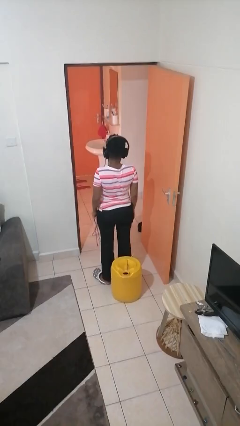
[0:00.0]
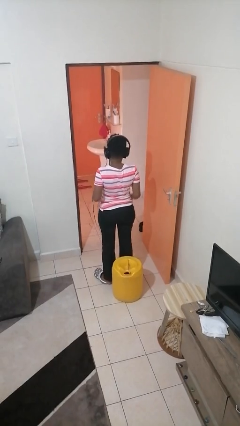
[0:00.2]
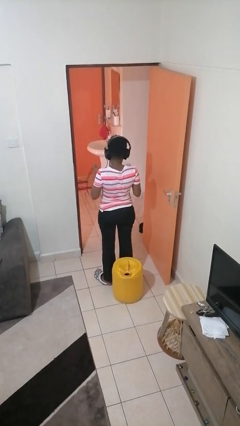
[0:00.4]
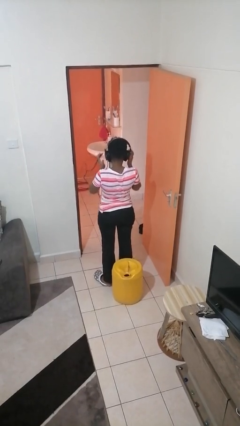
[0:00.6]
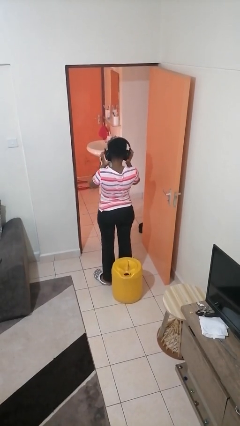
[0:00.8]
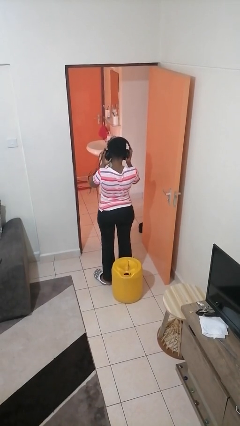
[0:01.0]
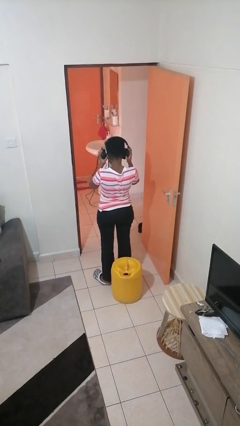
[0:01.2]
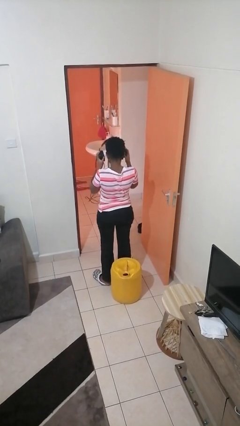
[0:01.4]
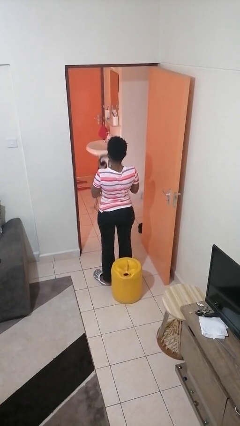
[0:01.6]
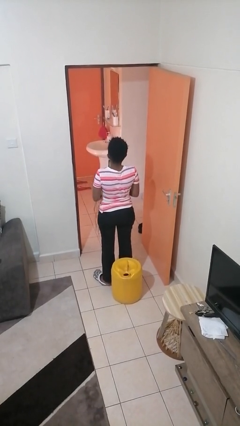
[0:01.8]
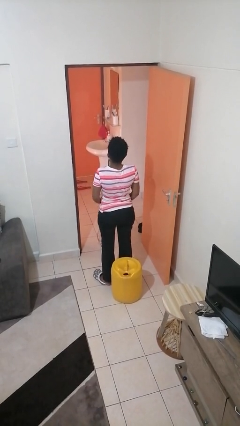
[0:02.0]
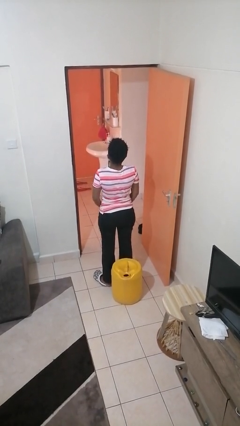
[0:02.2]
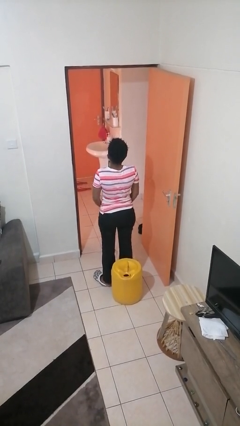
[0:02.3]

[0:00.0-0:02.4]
person takes off headphones

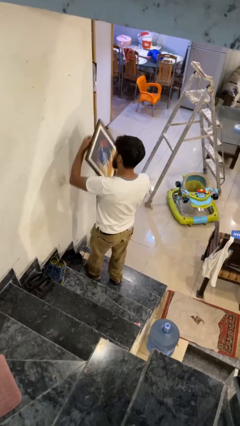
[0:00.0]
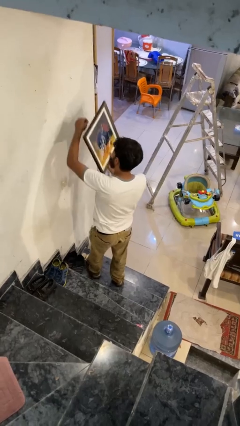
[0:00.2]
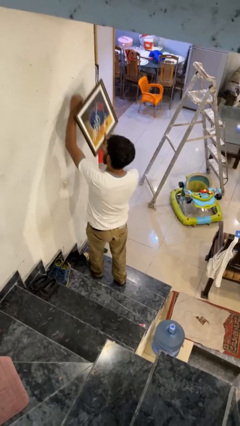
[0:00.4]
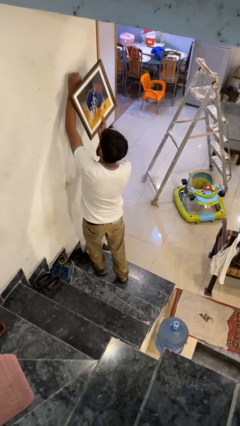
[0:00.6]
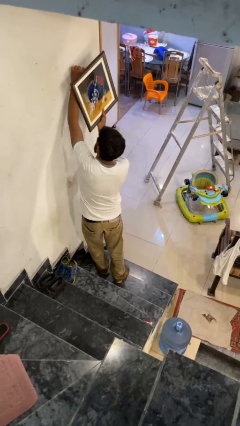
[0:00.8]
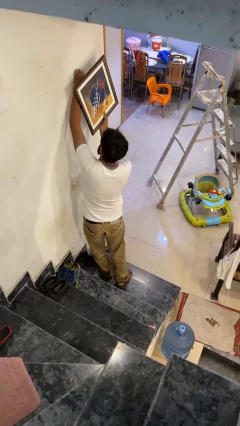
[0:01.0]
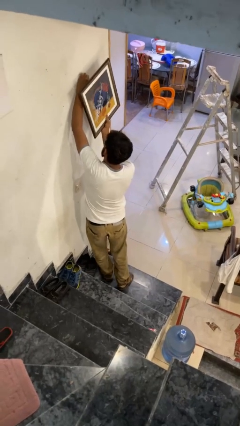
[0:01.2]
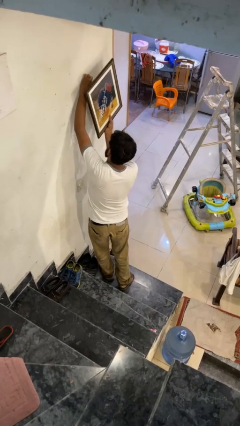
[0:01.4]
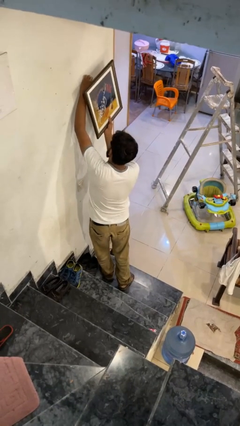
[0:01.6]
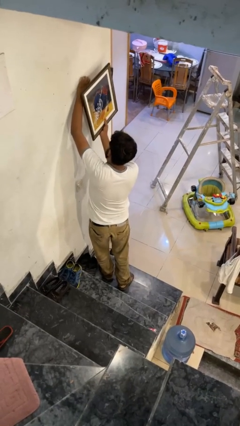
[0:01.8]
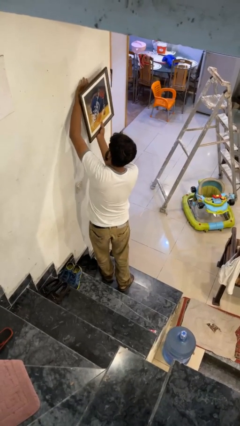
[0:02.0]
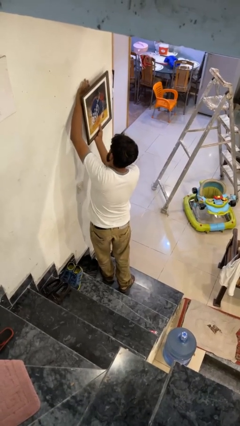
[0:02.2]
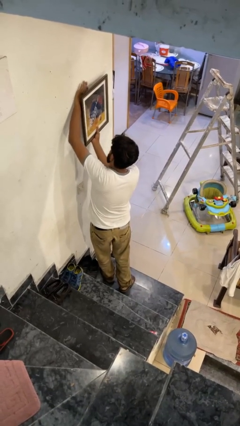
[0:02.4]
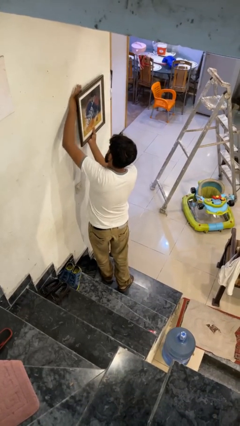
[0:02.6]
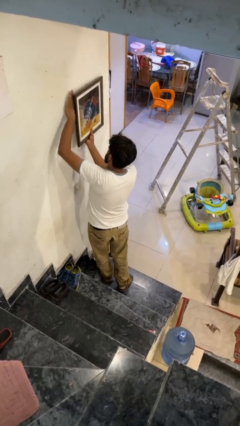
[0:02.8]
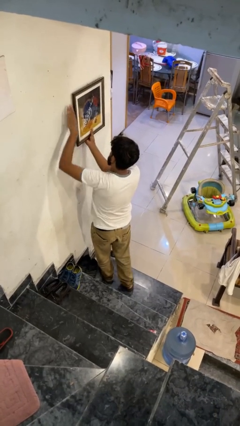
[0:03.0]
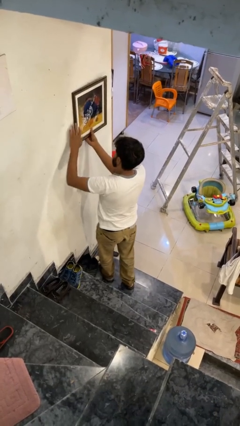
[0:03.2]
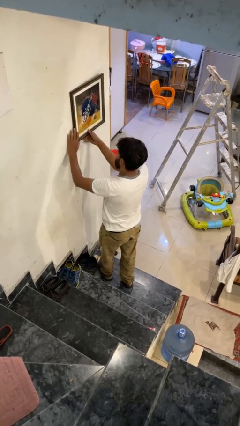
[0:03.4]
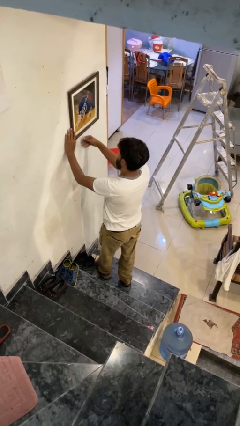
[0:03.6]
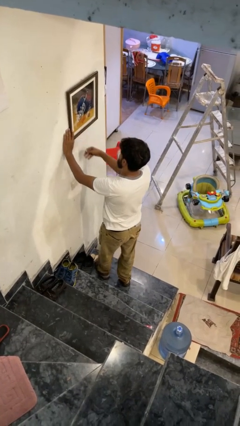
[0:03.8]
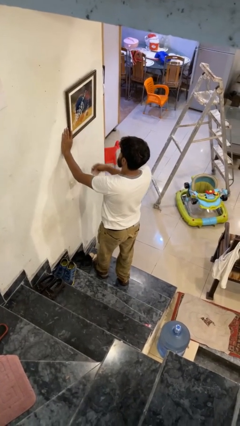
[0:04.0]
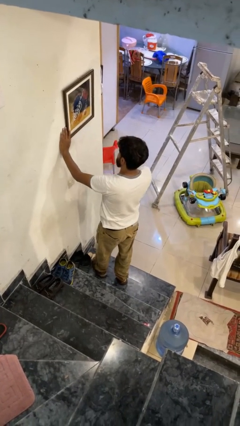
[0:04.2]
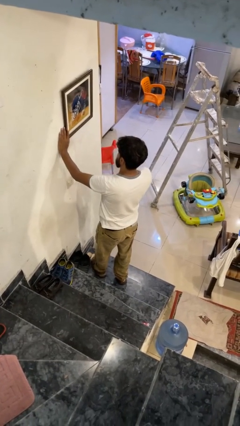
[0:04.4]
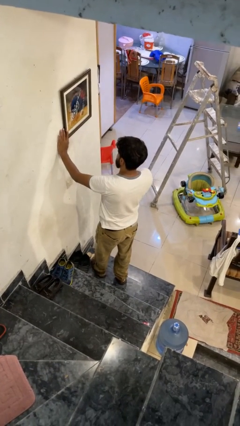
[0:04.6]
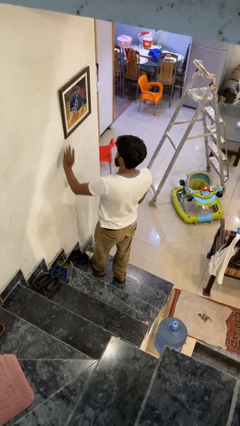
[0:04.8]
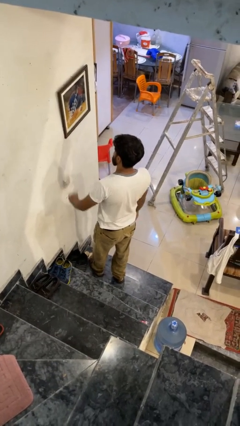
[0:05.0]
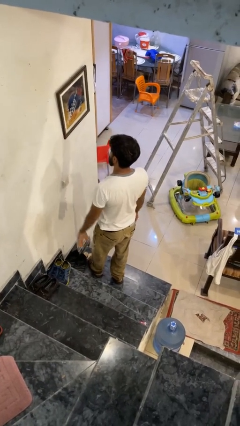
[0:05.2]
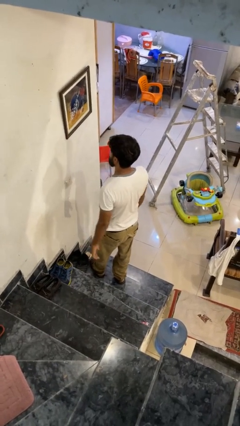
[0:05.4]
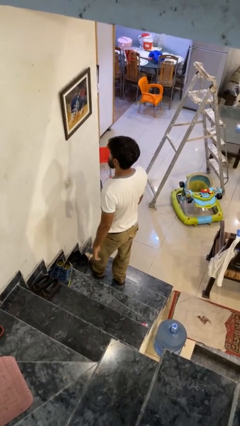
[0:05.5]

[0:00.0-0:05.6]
person puts up picture frame

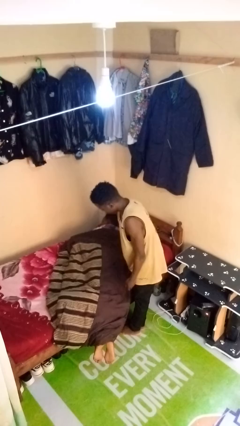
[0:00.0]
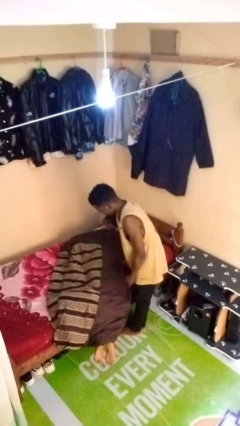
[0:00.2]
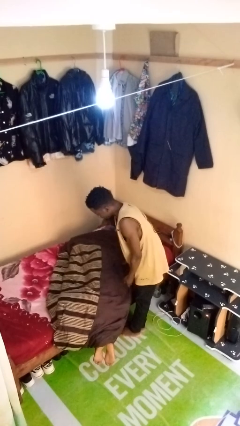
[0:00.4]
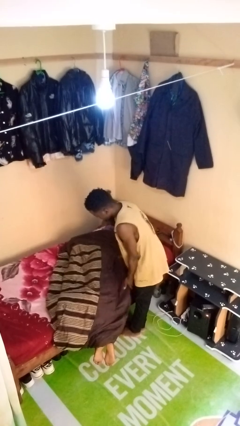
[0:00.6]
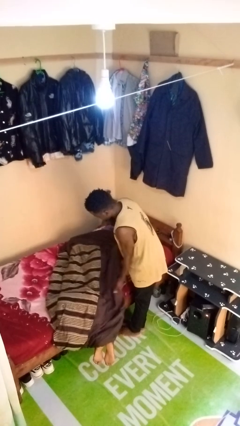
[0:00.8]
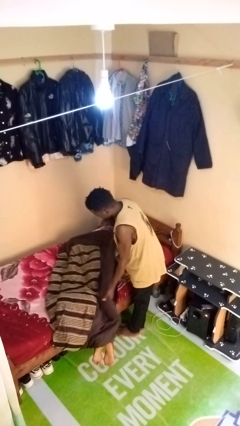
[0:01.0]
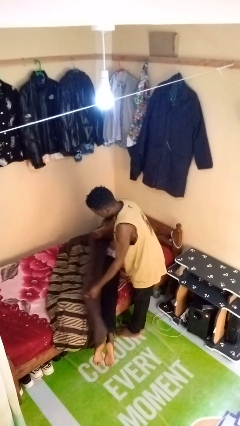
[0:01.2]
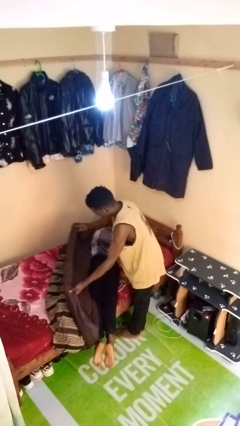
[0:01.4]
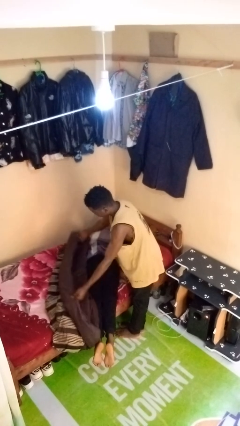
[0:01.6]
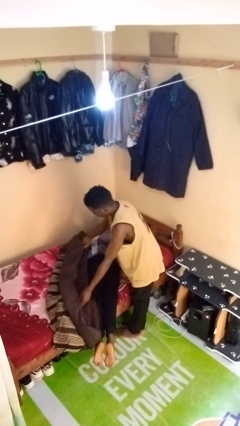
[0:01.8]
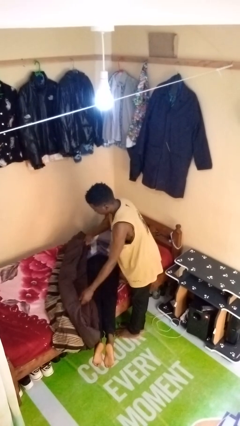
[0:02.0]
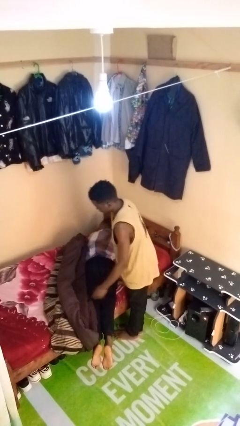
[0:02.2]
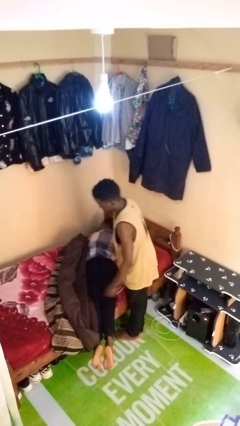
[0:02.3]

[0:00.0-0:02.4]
person uncovers friend with blanket

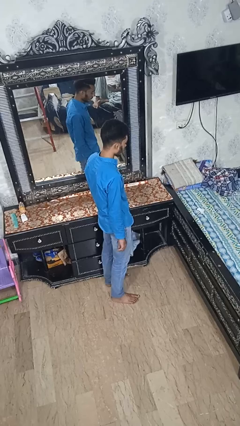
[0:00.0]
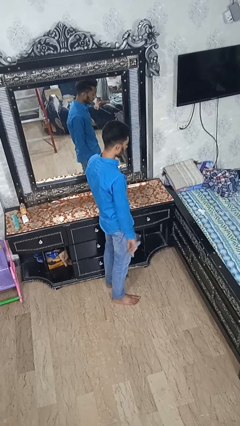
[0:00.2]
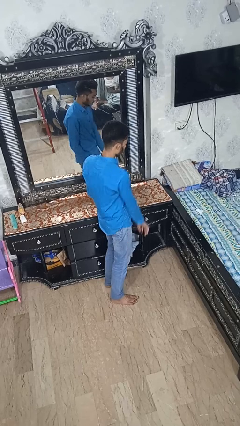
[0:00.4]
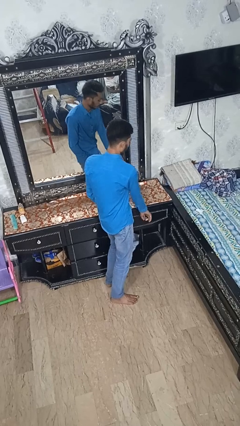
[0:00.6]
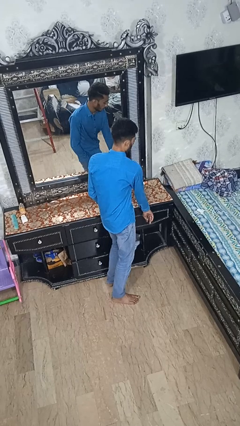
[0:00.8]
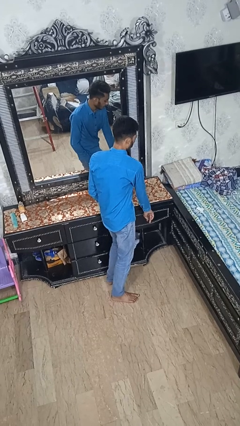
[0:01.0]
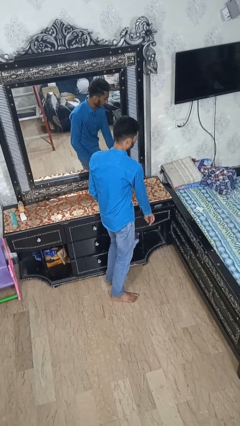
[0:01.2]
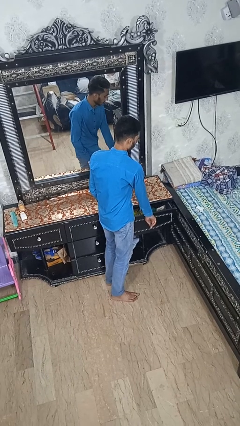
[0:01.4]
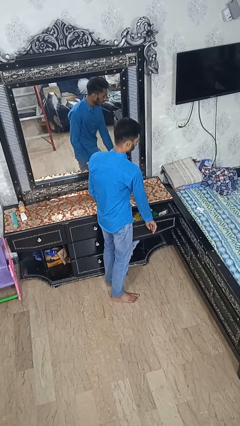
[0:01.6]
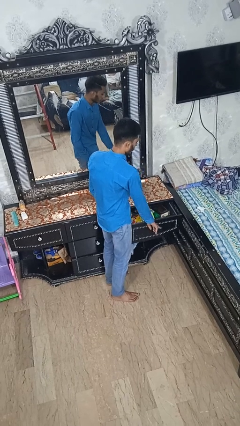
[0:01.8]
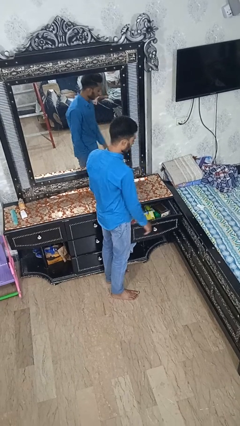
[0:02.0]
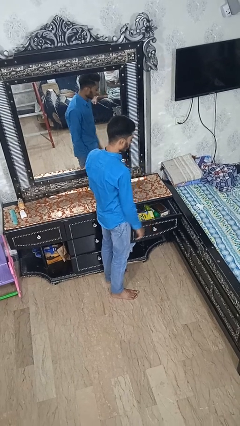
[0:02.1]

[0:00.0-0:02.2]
person opens dresser drawer

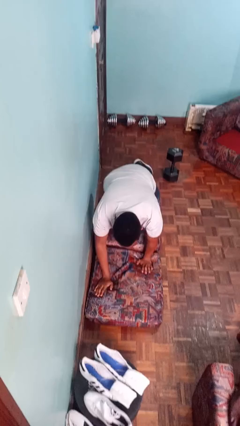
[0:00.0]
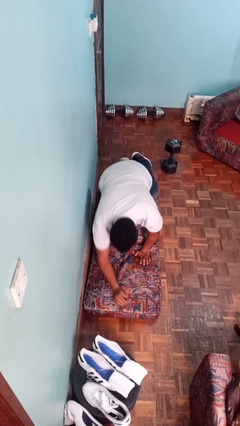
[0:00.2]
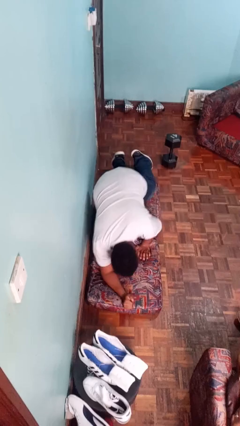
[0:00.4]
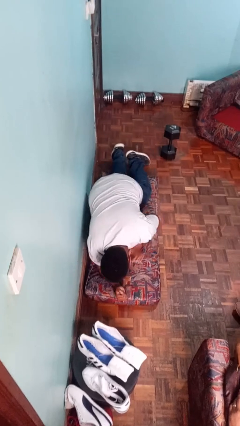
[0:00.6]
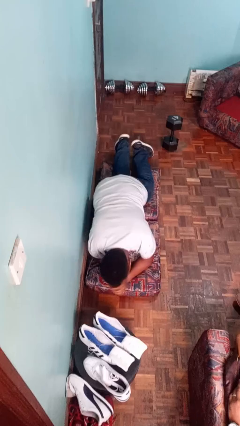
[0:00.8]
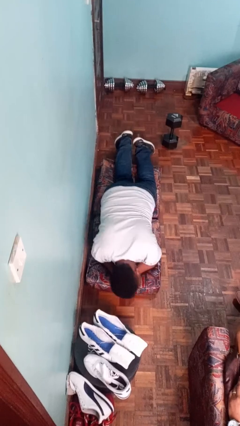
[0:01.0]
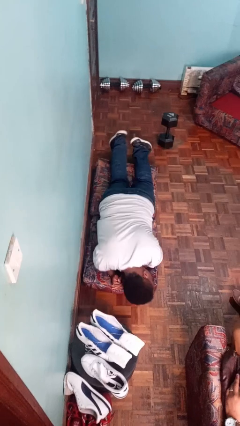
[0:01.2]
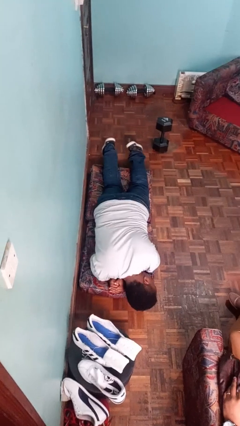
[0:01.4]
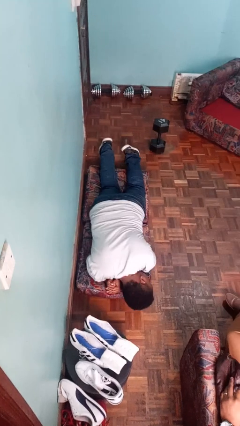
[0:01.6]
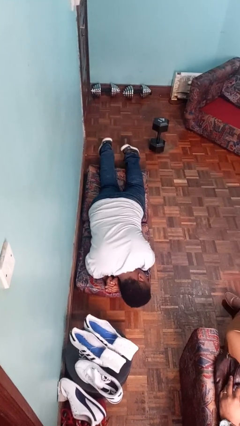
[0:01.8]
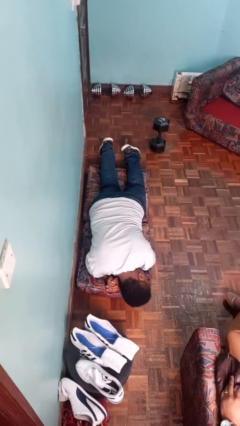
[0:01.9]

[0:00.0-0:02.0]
person lies down on floor

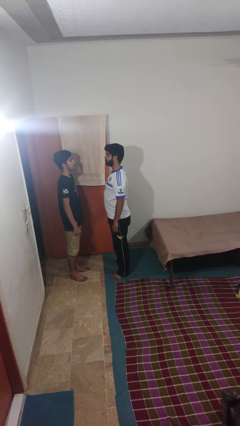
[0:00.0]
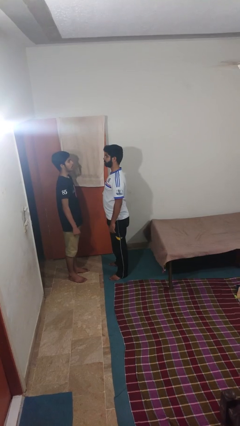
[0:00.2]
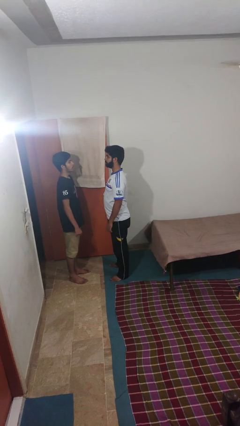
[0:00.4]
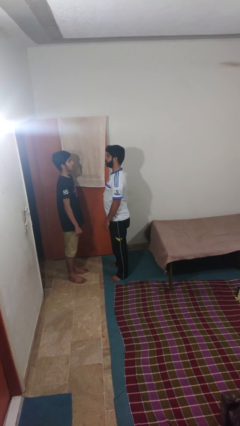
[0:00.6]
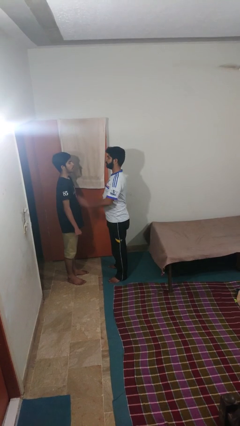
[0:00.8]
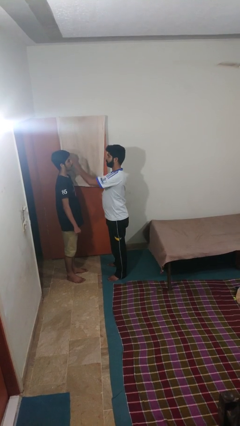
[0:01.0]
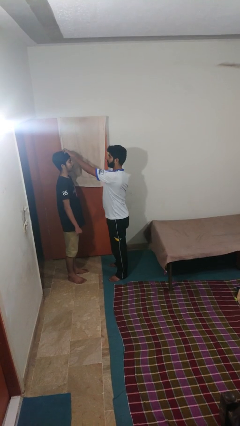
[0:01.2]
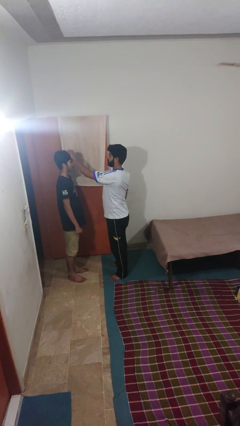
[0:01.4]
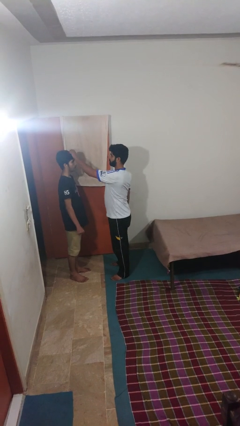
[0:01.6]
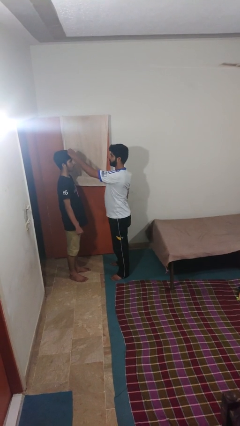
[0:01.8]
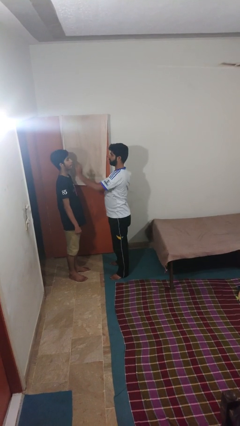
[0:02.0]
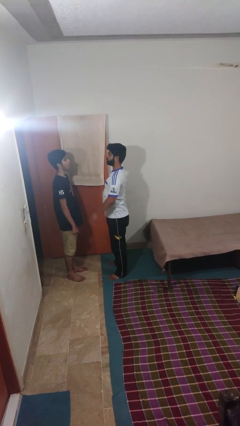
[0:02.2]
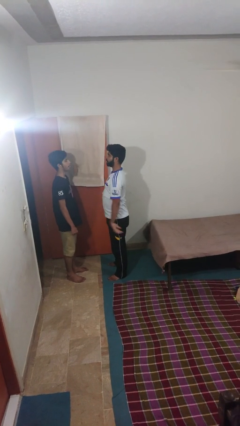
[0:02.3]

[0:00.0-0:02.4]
person grabs person by hair
